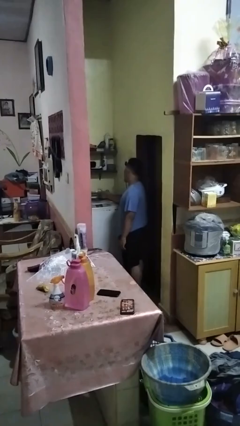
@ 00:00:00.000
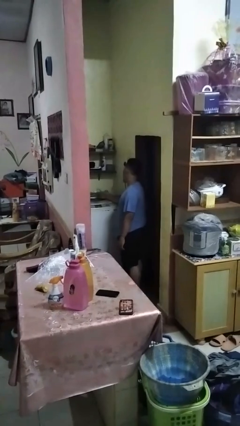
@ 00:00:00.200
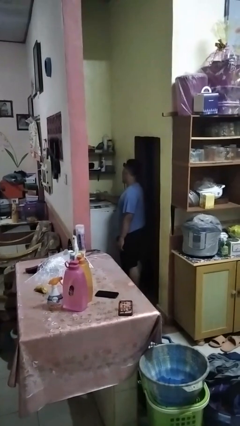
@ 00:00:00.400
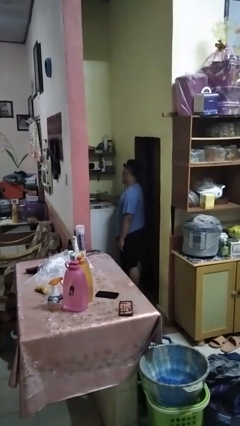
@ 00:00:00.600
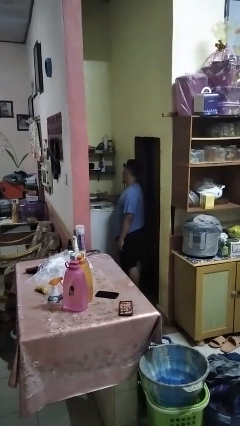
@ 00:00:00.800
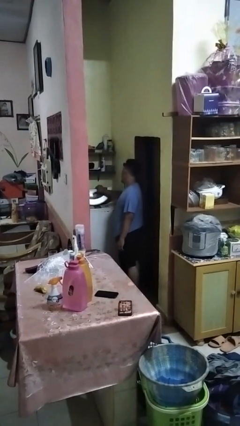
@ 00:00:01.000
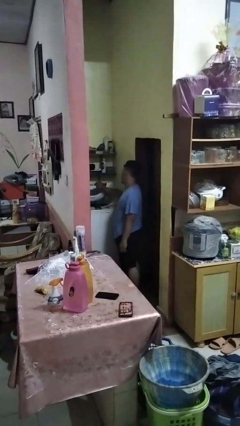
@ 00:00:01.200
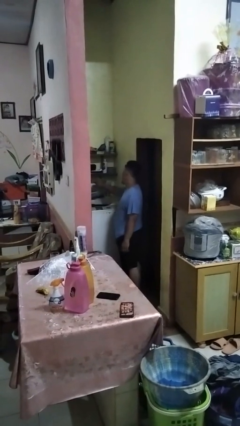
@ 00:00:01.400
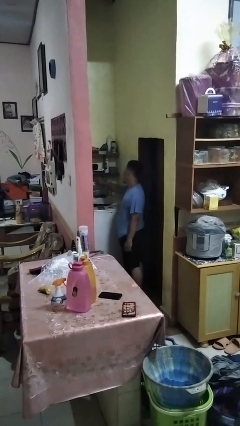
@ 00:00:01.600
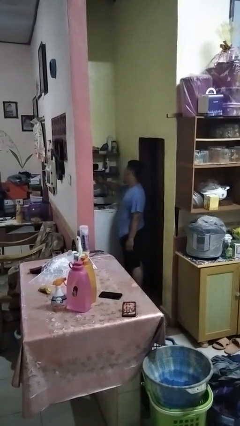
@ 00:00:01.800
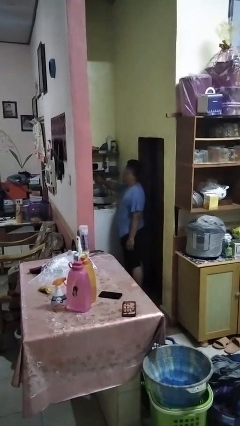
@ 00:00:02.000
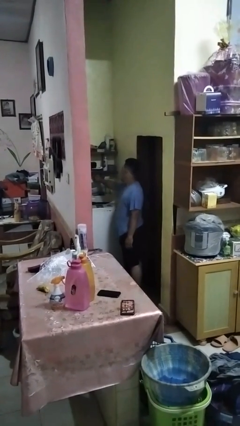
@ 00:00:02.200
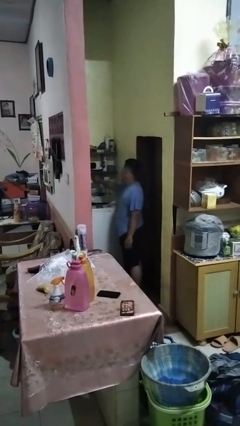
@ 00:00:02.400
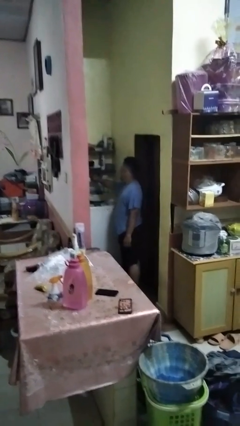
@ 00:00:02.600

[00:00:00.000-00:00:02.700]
person opens clothes washer

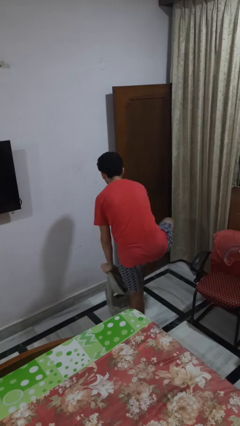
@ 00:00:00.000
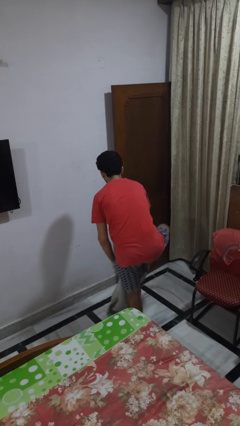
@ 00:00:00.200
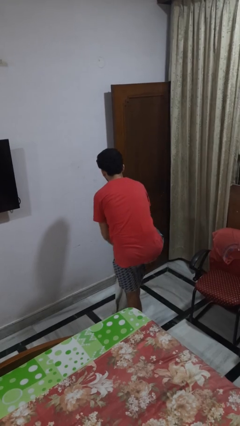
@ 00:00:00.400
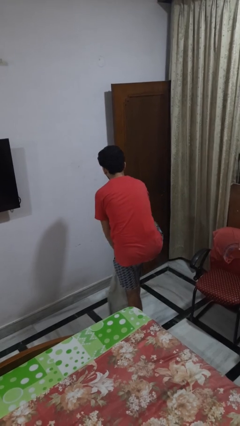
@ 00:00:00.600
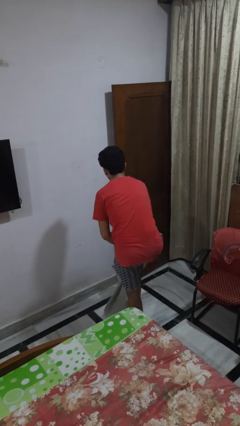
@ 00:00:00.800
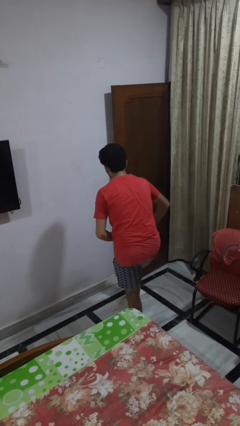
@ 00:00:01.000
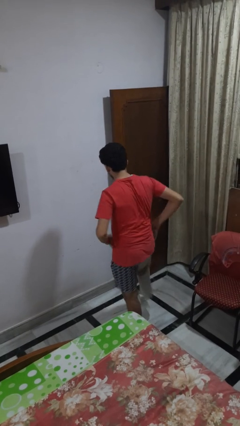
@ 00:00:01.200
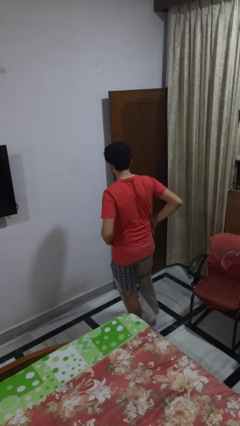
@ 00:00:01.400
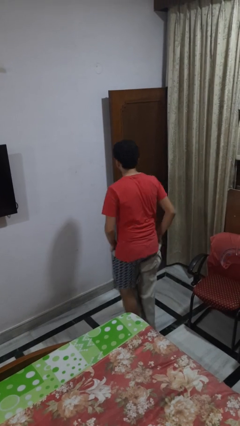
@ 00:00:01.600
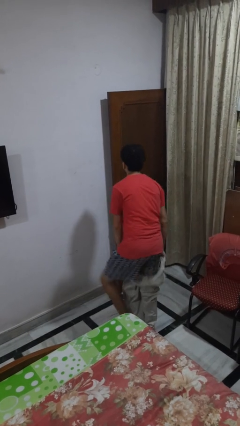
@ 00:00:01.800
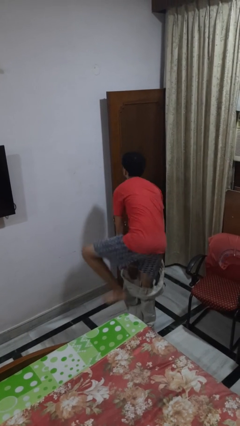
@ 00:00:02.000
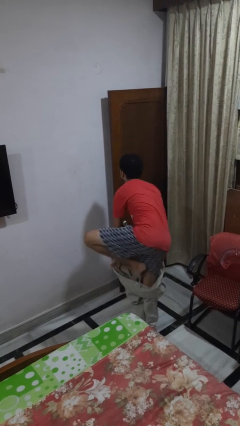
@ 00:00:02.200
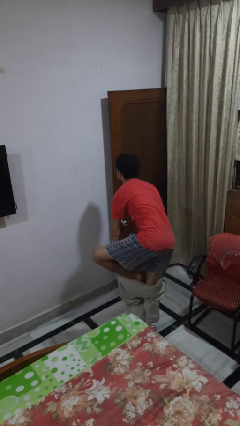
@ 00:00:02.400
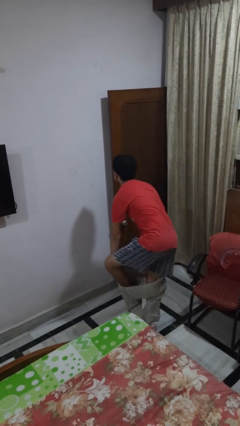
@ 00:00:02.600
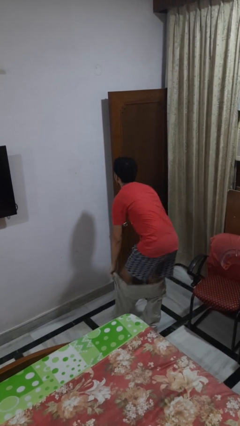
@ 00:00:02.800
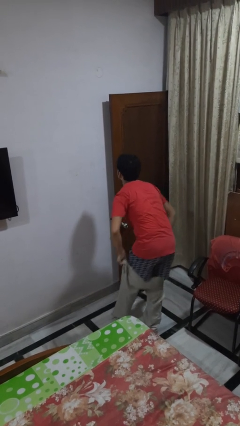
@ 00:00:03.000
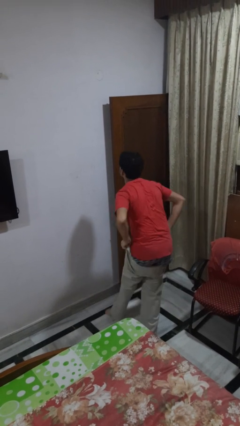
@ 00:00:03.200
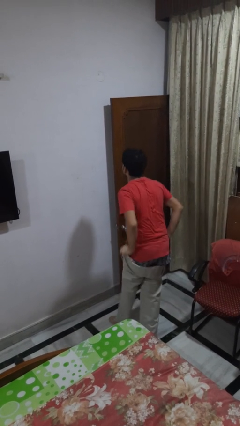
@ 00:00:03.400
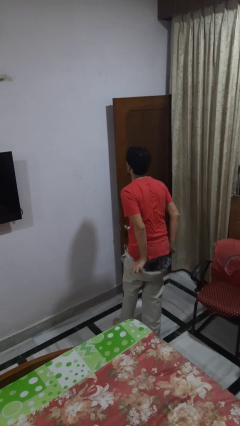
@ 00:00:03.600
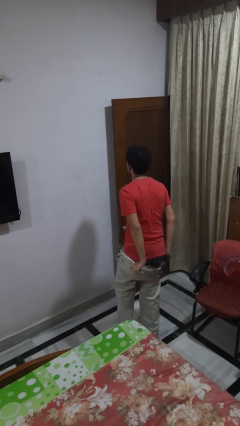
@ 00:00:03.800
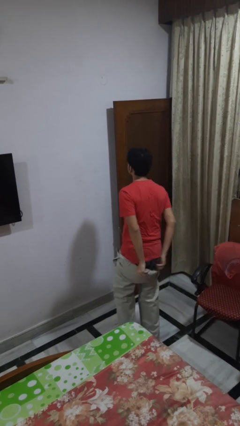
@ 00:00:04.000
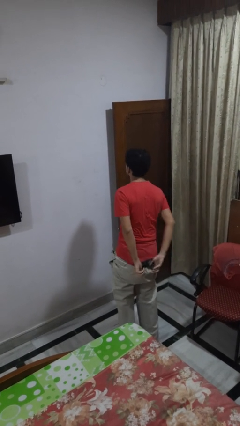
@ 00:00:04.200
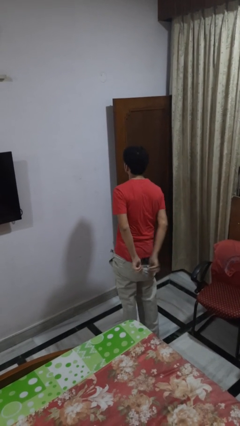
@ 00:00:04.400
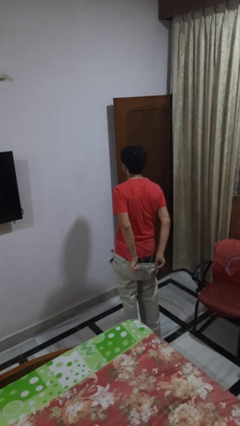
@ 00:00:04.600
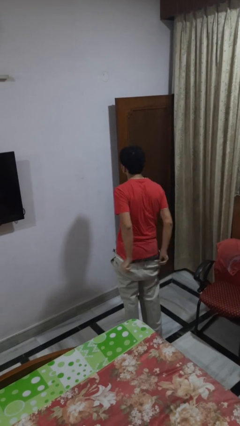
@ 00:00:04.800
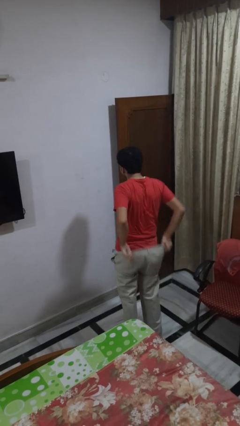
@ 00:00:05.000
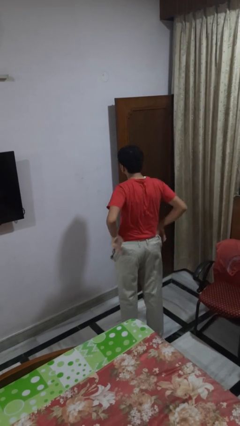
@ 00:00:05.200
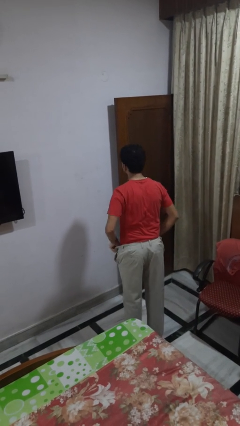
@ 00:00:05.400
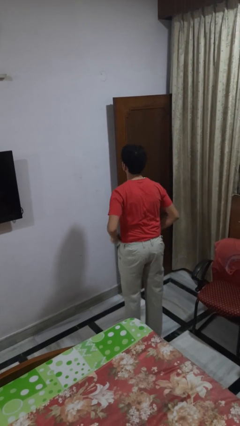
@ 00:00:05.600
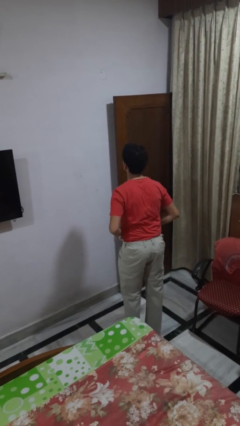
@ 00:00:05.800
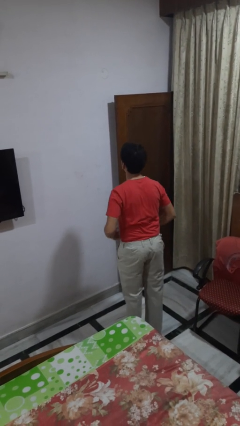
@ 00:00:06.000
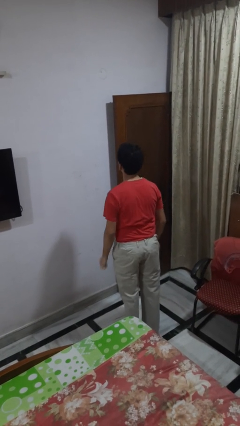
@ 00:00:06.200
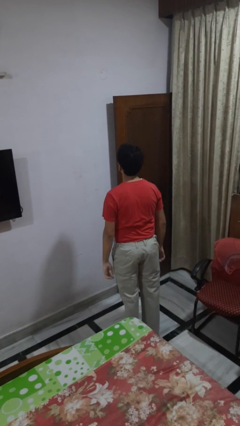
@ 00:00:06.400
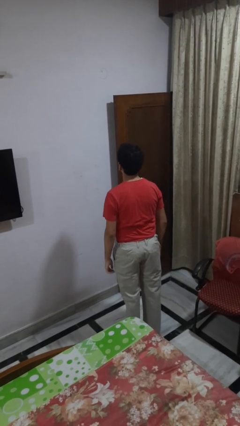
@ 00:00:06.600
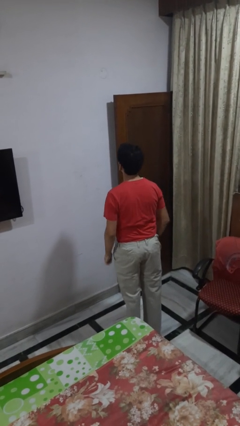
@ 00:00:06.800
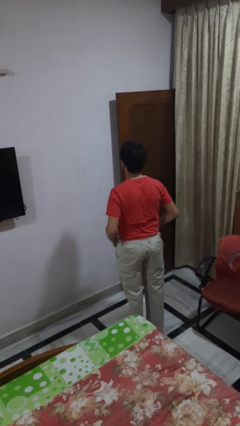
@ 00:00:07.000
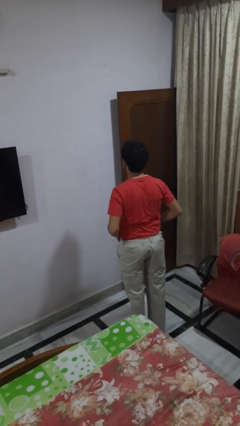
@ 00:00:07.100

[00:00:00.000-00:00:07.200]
person puts on pants

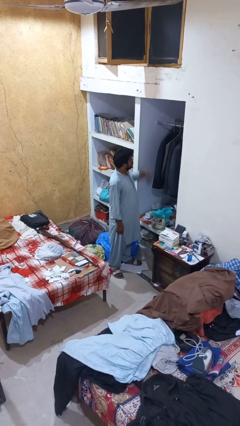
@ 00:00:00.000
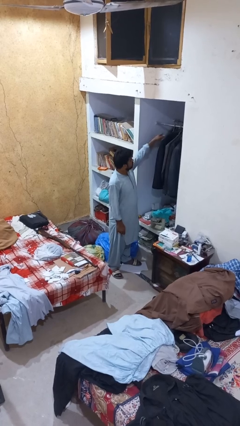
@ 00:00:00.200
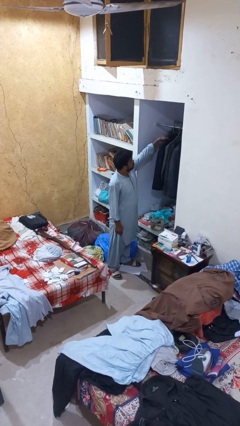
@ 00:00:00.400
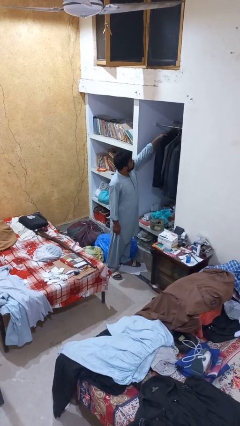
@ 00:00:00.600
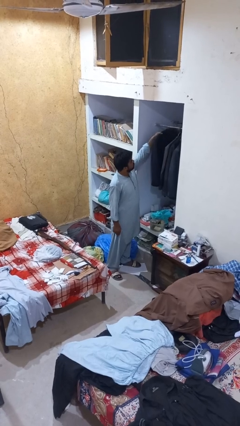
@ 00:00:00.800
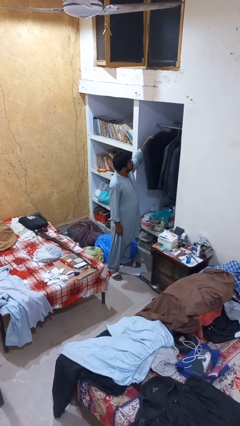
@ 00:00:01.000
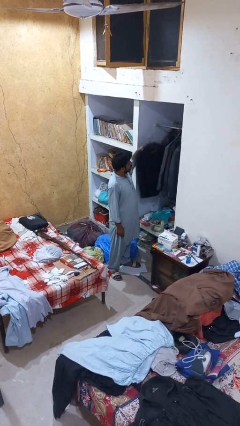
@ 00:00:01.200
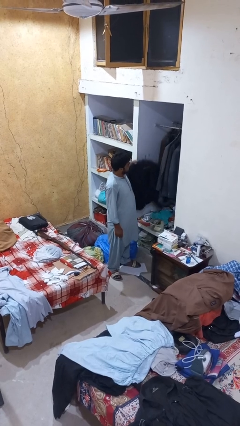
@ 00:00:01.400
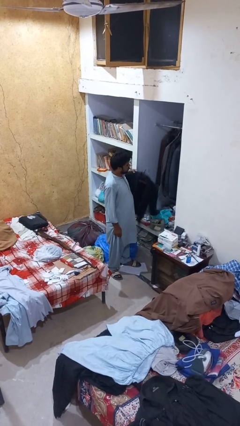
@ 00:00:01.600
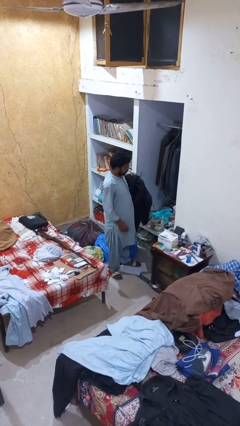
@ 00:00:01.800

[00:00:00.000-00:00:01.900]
person takes clothes from closet

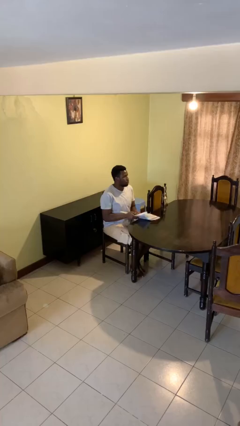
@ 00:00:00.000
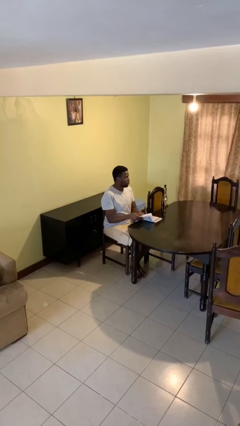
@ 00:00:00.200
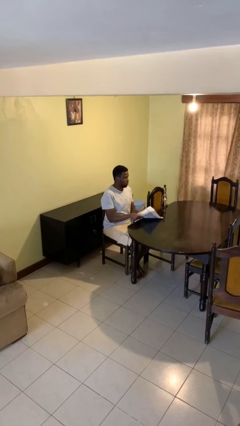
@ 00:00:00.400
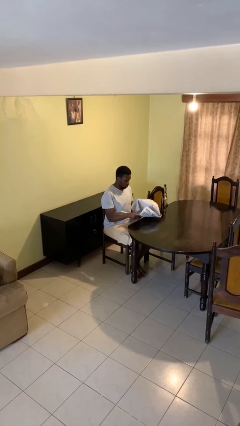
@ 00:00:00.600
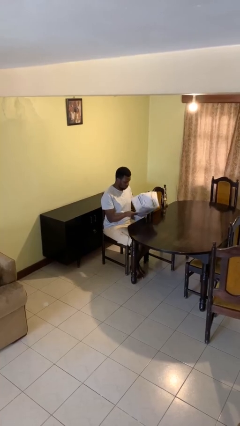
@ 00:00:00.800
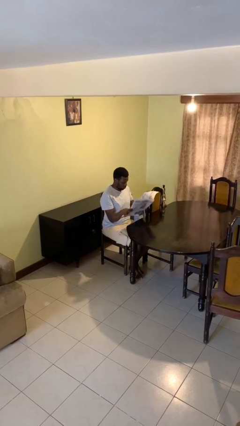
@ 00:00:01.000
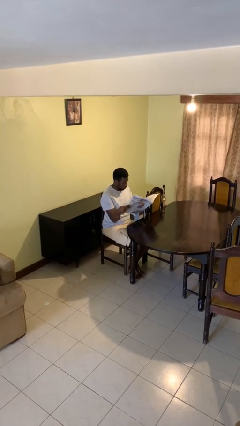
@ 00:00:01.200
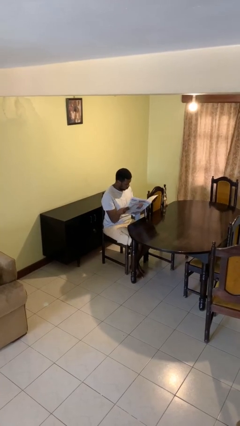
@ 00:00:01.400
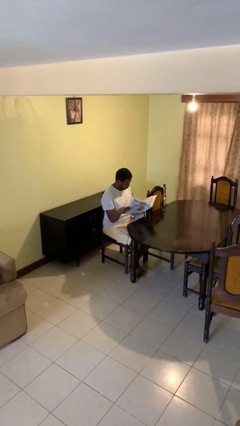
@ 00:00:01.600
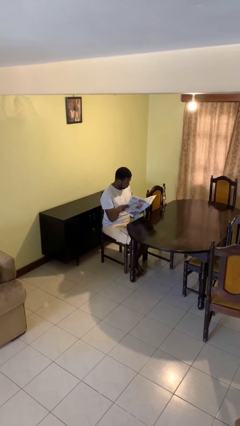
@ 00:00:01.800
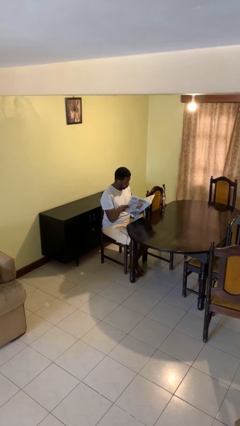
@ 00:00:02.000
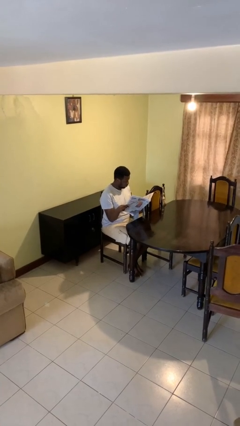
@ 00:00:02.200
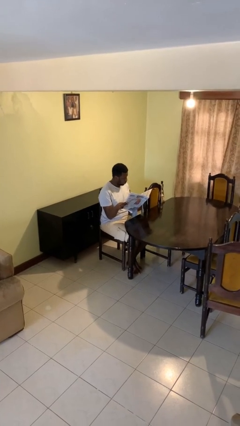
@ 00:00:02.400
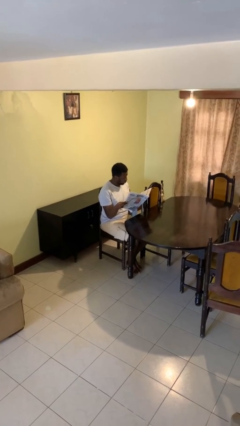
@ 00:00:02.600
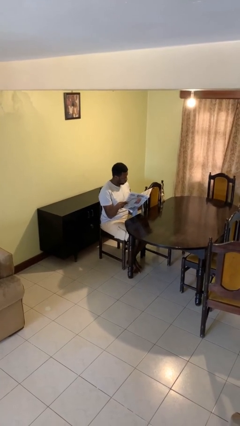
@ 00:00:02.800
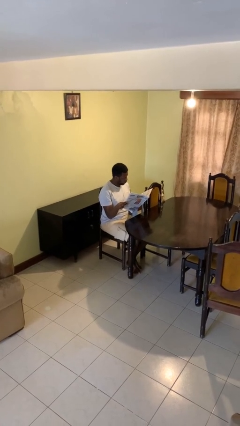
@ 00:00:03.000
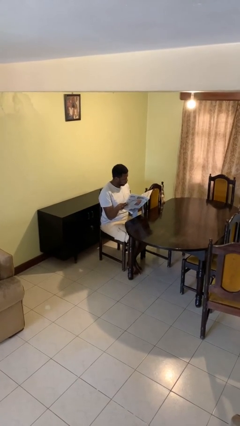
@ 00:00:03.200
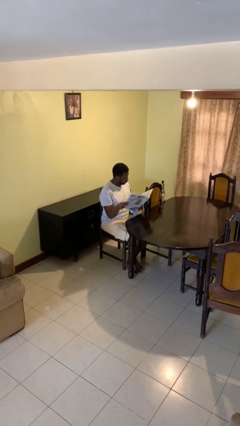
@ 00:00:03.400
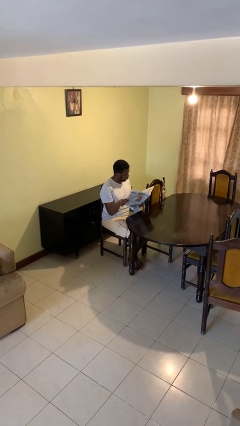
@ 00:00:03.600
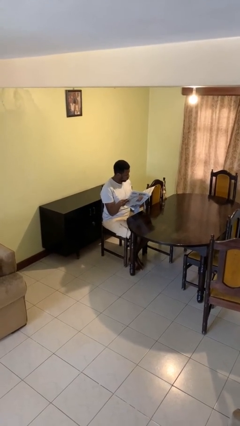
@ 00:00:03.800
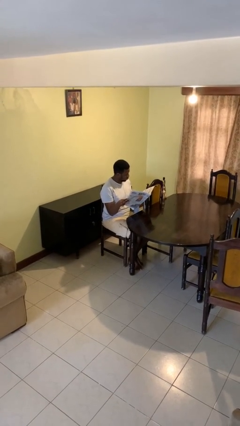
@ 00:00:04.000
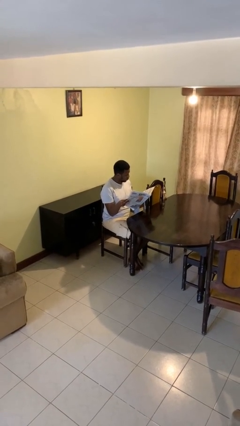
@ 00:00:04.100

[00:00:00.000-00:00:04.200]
person reads document

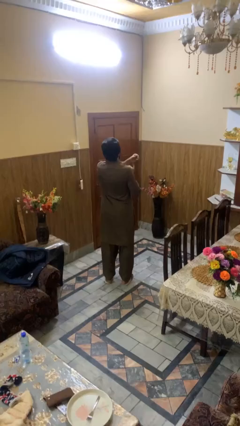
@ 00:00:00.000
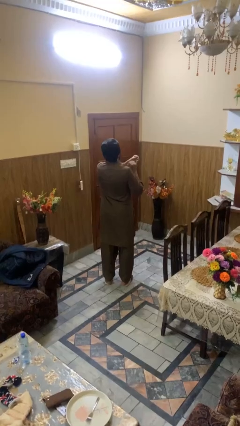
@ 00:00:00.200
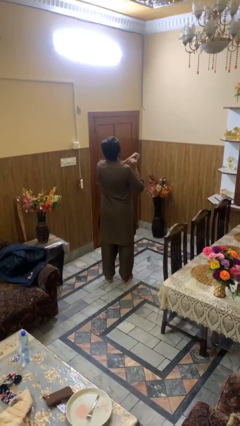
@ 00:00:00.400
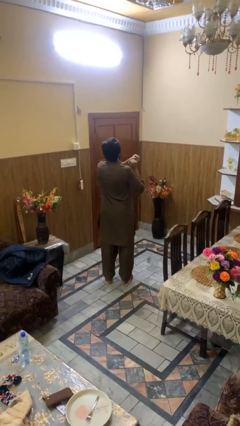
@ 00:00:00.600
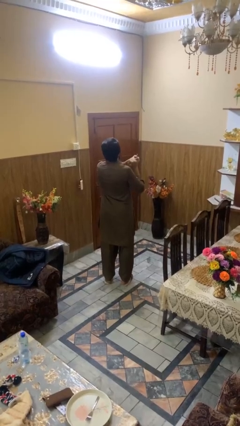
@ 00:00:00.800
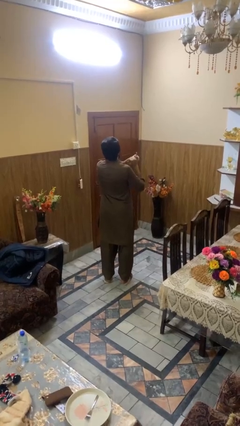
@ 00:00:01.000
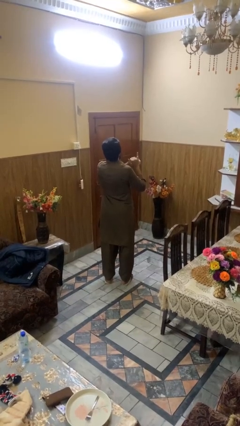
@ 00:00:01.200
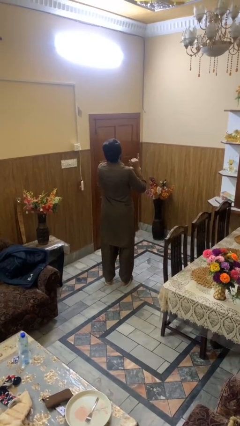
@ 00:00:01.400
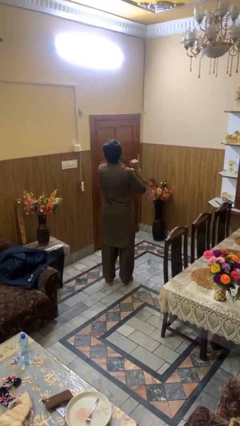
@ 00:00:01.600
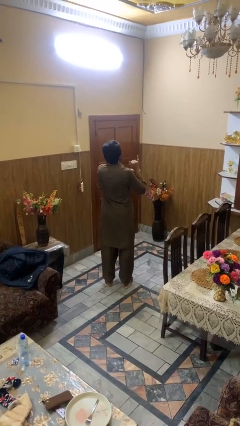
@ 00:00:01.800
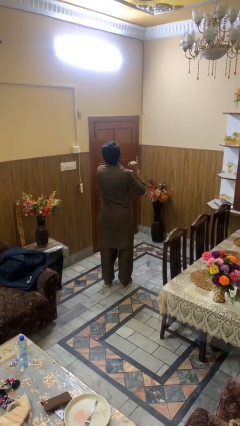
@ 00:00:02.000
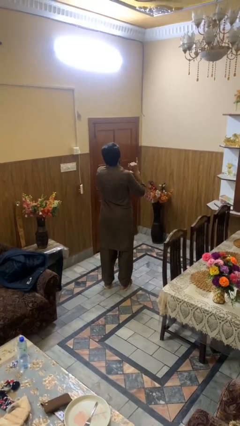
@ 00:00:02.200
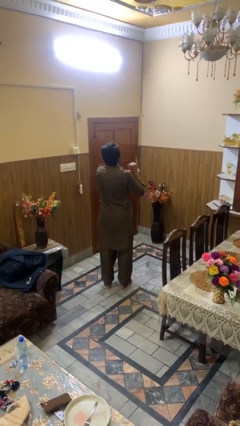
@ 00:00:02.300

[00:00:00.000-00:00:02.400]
person puts on ring
